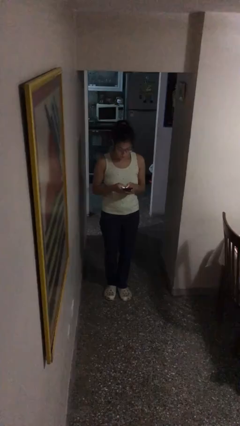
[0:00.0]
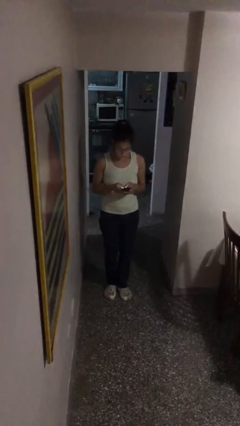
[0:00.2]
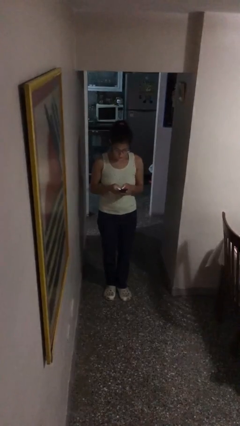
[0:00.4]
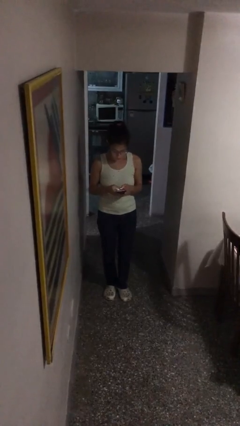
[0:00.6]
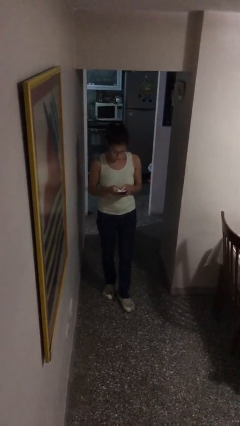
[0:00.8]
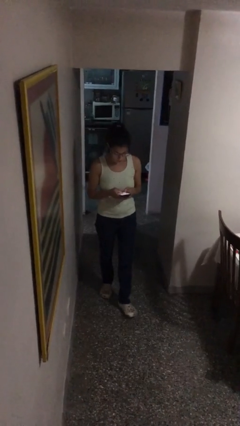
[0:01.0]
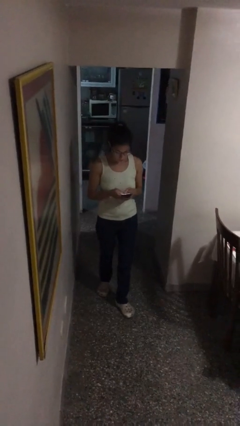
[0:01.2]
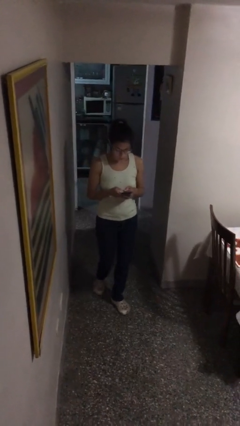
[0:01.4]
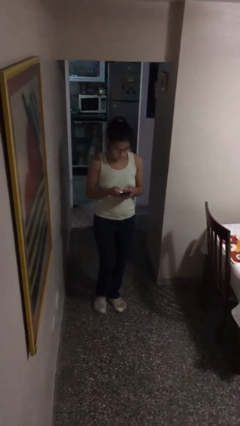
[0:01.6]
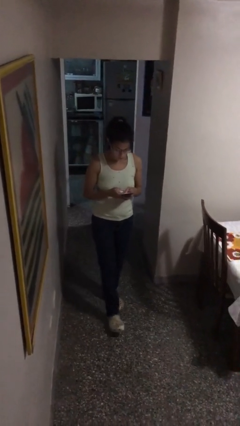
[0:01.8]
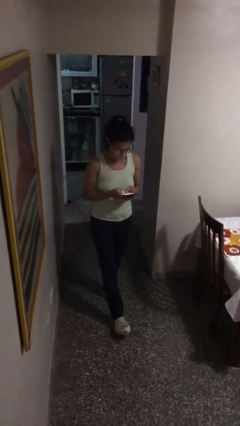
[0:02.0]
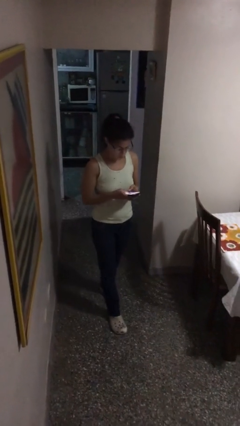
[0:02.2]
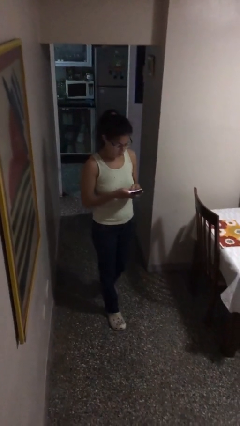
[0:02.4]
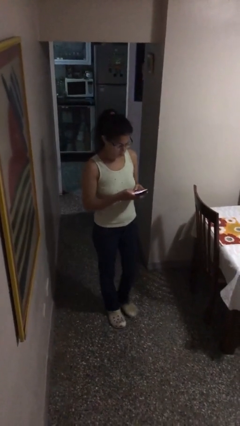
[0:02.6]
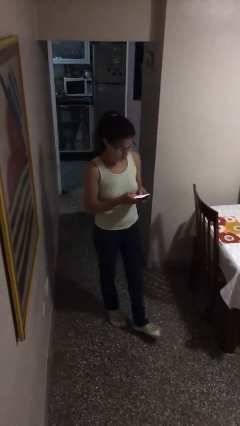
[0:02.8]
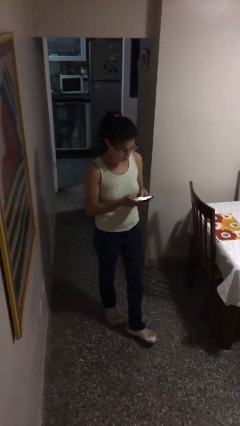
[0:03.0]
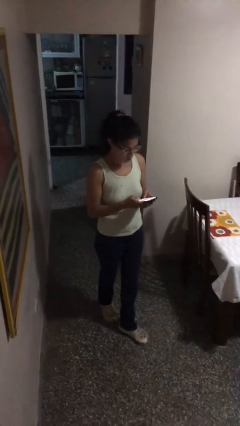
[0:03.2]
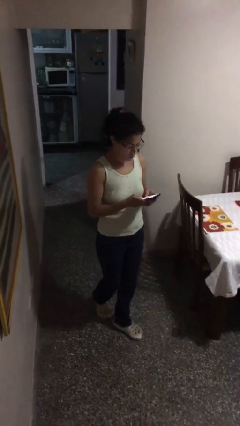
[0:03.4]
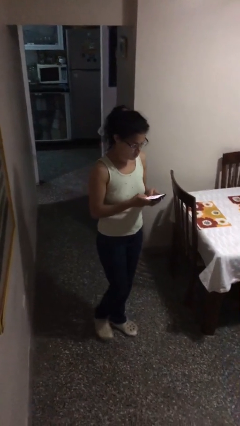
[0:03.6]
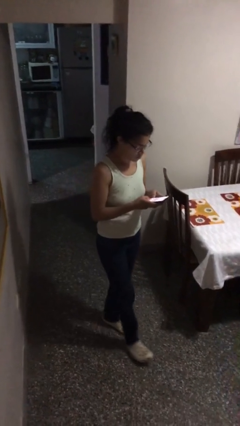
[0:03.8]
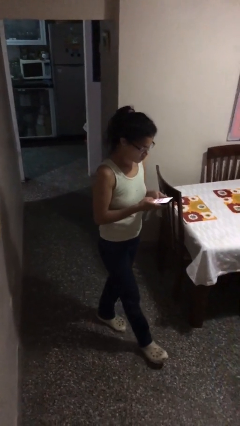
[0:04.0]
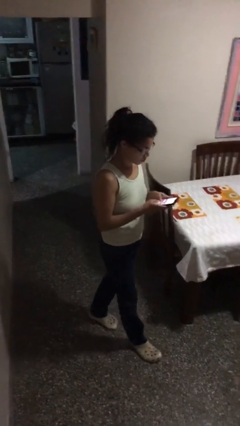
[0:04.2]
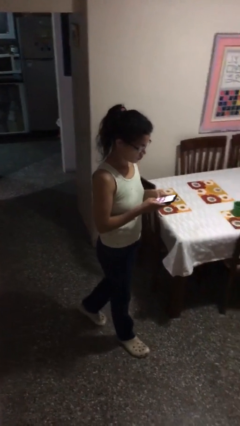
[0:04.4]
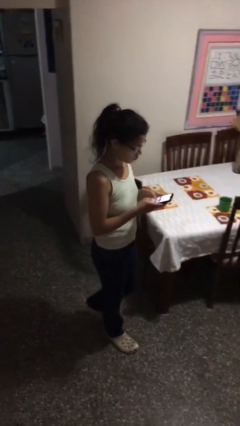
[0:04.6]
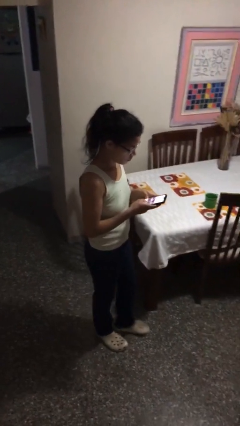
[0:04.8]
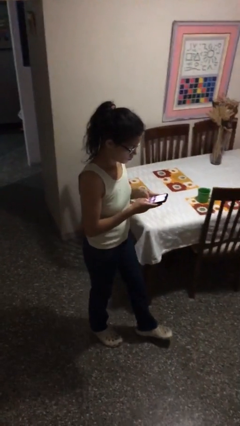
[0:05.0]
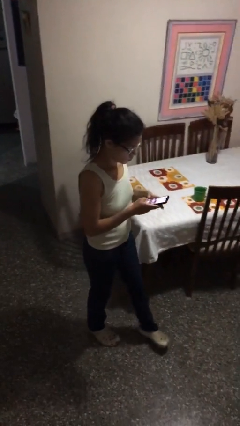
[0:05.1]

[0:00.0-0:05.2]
person texts on phone

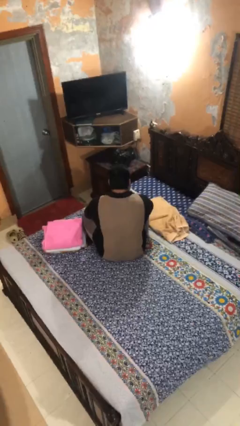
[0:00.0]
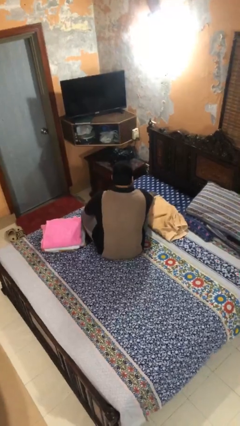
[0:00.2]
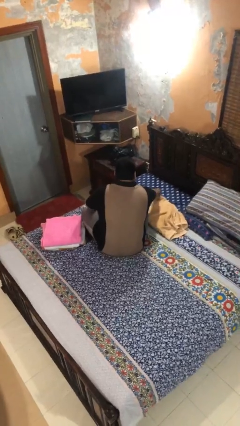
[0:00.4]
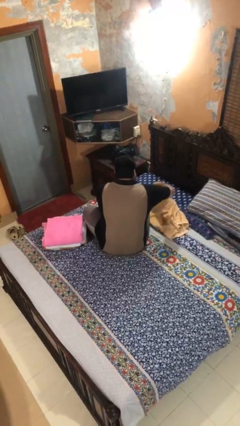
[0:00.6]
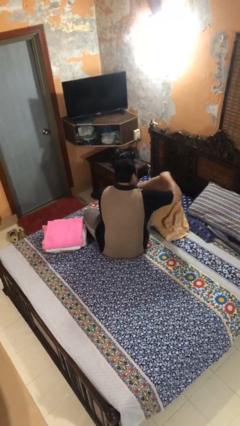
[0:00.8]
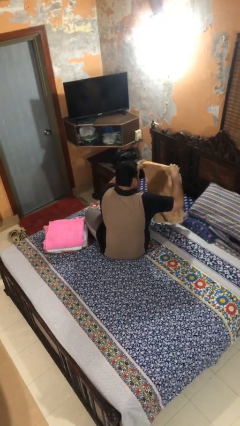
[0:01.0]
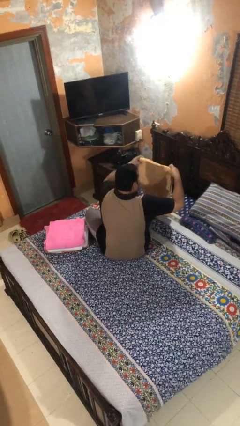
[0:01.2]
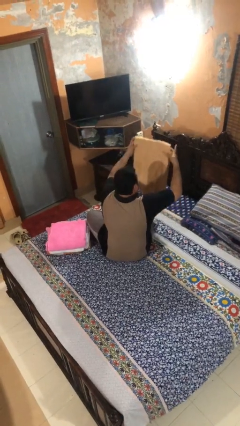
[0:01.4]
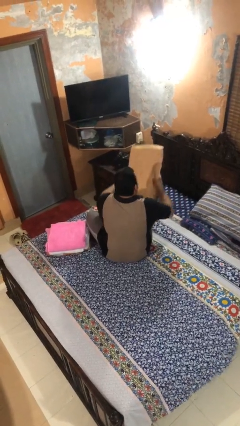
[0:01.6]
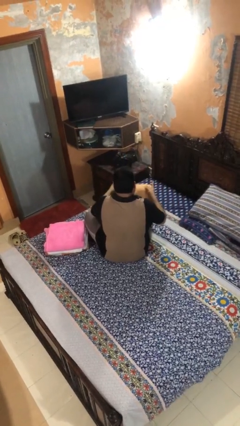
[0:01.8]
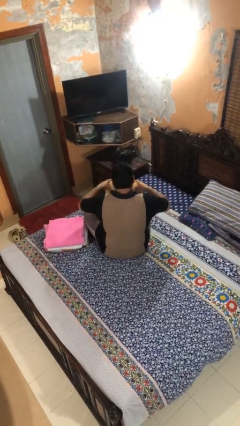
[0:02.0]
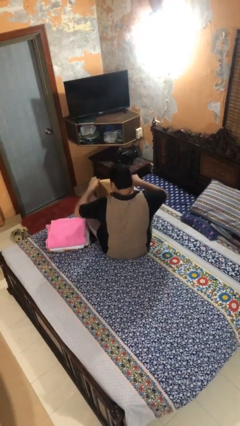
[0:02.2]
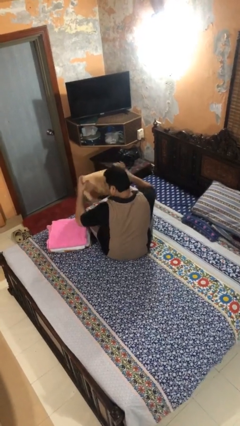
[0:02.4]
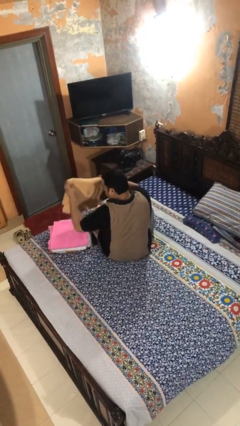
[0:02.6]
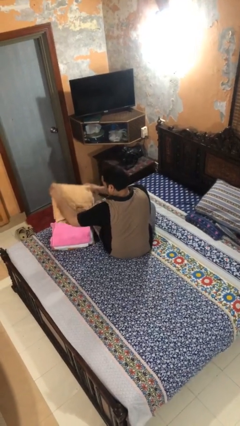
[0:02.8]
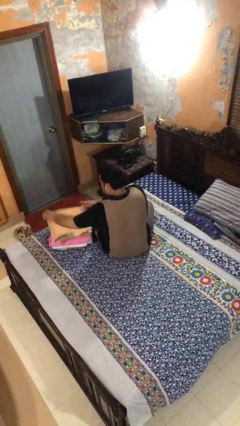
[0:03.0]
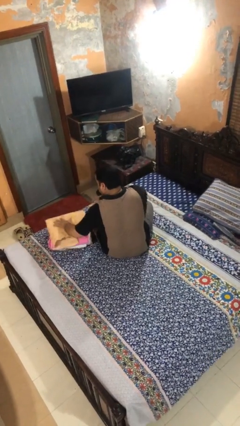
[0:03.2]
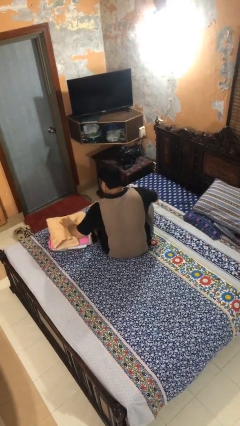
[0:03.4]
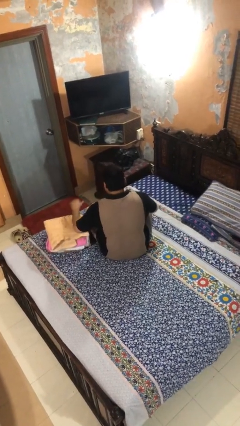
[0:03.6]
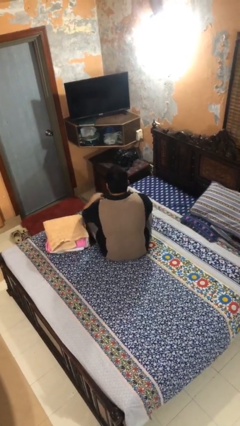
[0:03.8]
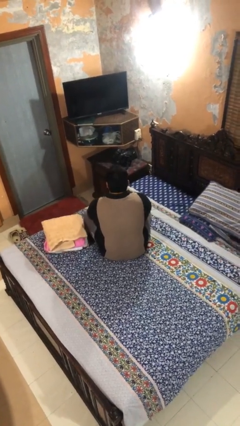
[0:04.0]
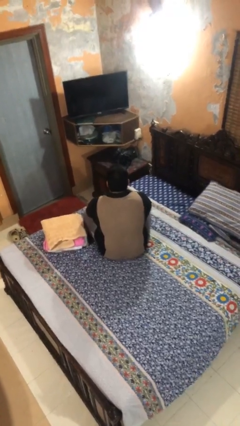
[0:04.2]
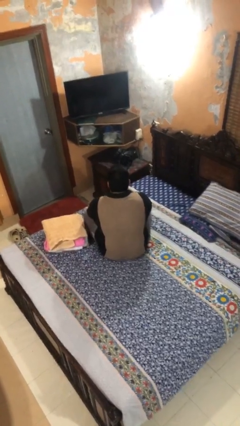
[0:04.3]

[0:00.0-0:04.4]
person folds towel

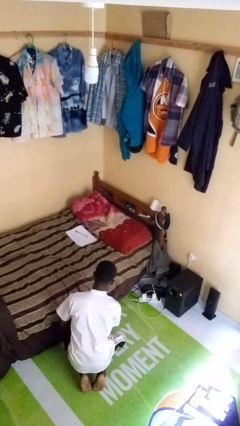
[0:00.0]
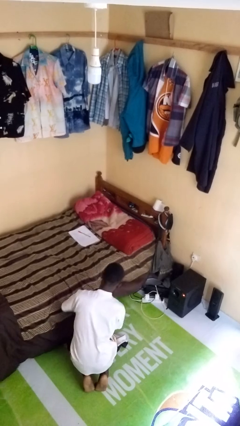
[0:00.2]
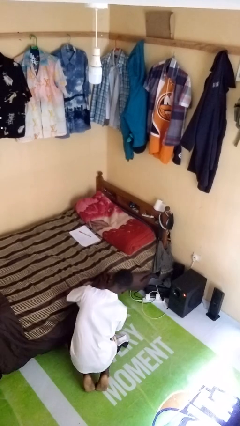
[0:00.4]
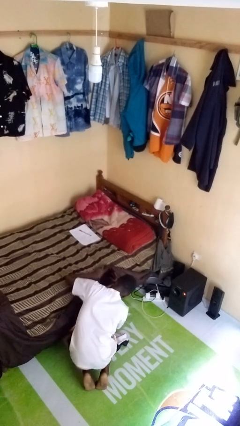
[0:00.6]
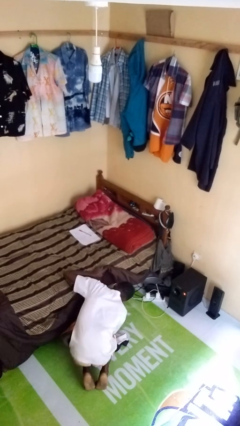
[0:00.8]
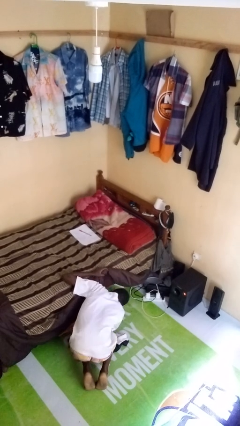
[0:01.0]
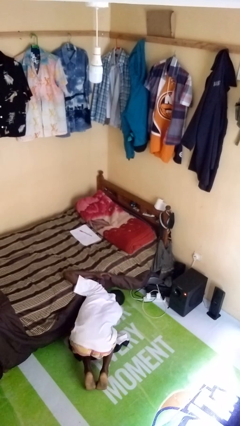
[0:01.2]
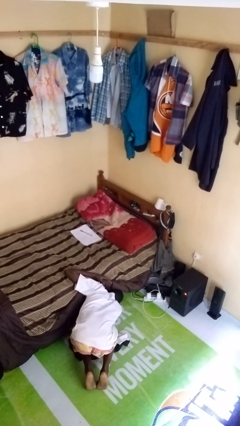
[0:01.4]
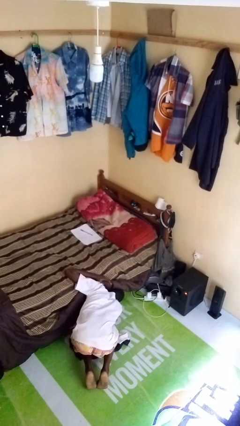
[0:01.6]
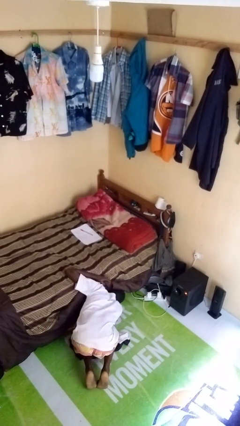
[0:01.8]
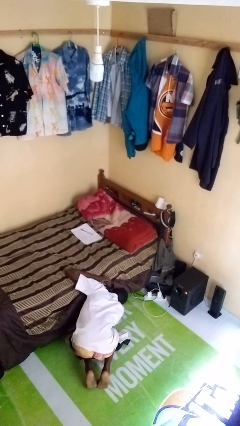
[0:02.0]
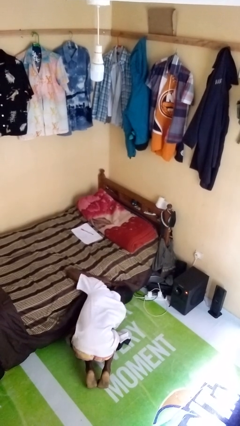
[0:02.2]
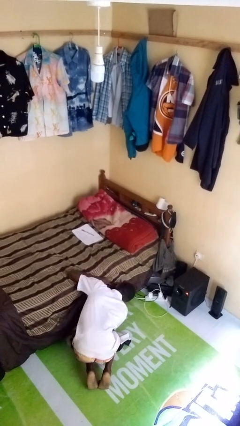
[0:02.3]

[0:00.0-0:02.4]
person searches under bed

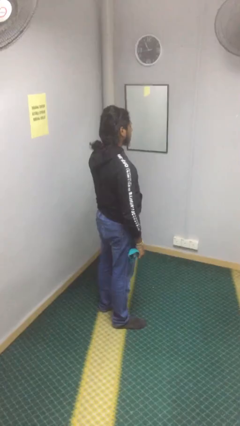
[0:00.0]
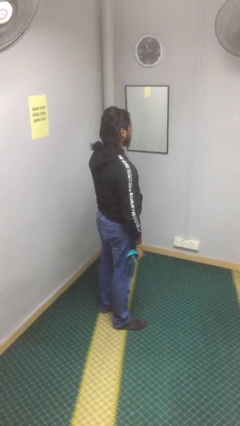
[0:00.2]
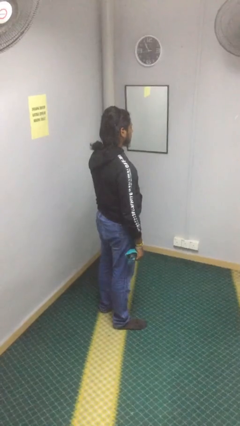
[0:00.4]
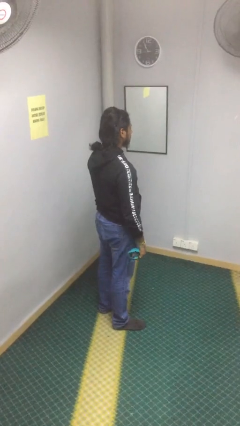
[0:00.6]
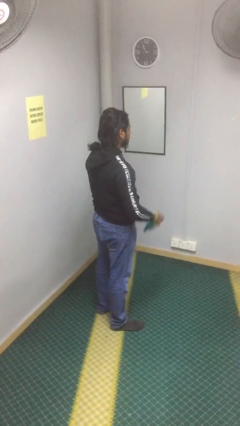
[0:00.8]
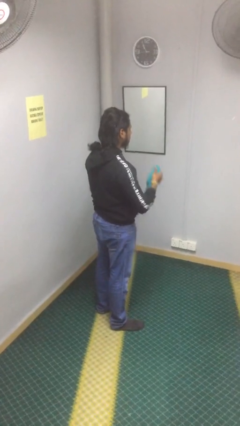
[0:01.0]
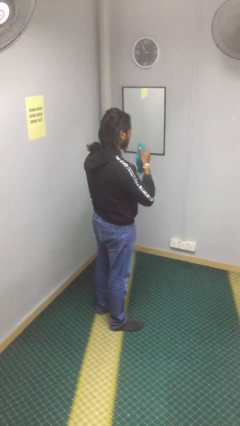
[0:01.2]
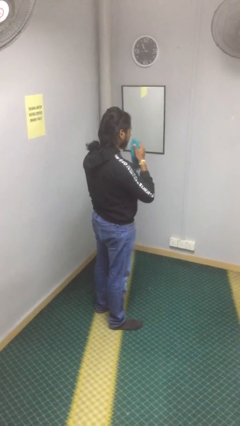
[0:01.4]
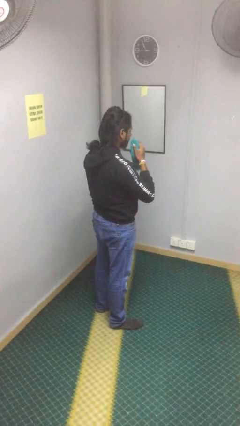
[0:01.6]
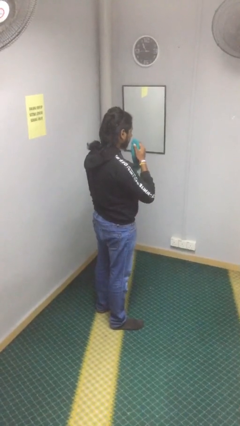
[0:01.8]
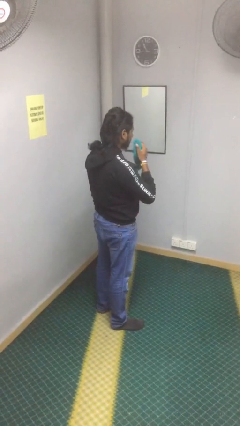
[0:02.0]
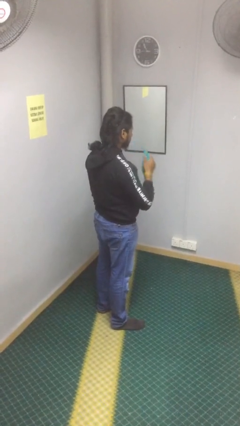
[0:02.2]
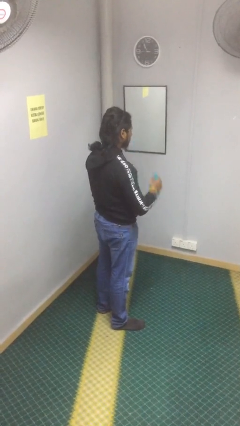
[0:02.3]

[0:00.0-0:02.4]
person wipes mouth with napkin

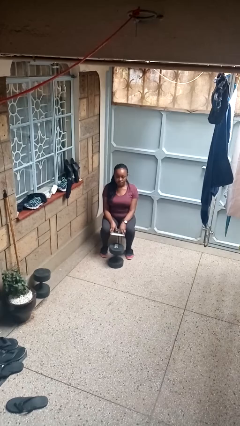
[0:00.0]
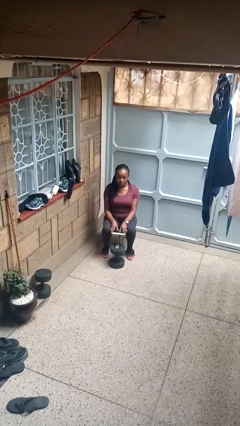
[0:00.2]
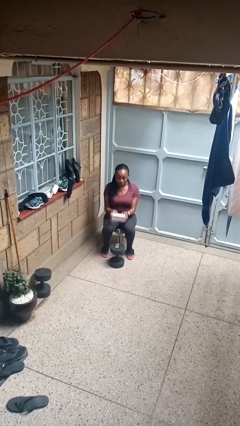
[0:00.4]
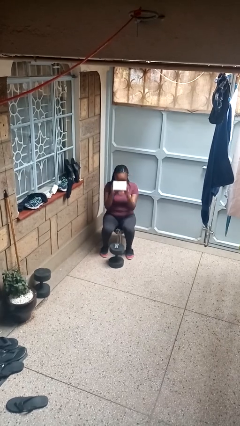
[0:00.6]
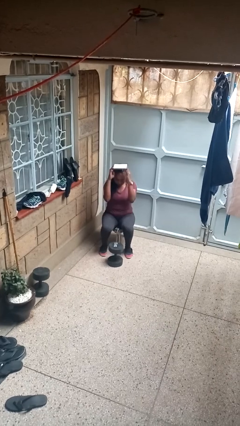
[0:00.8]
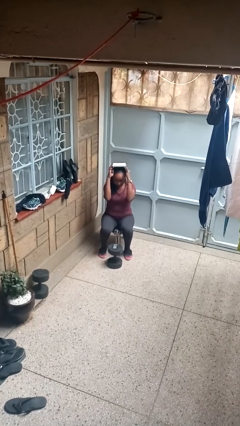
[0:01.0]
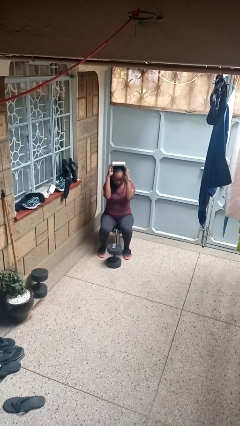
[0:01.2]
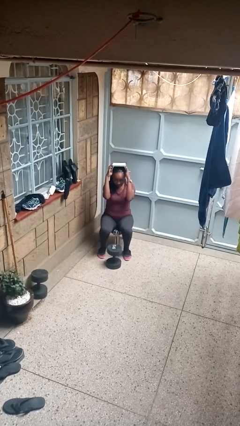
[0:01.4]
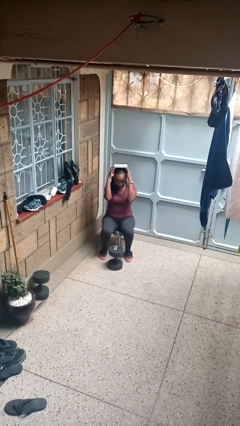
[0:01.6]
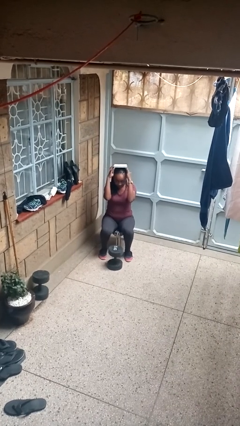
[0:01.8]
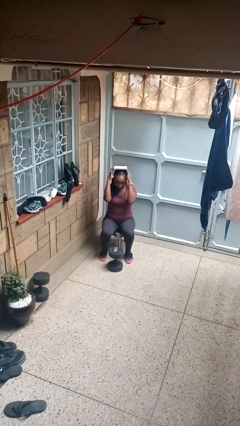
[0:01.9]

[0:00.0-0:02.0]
person holds object above head

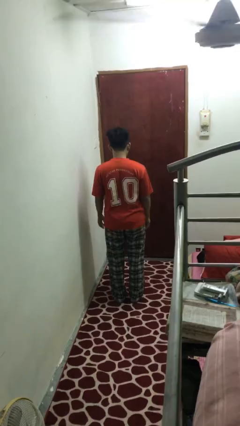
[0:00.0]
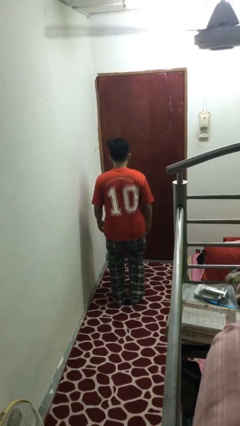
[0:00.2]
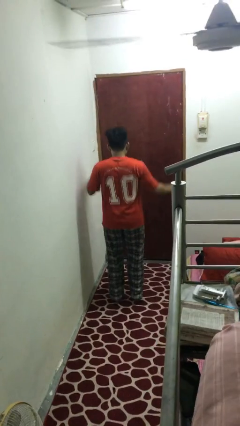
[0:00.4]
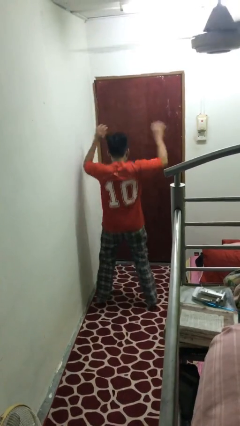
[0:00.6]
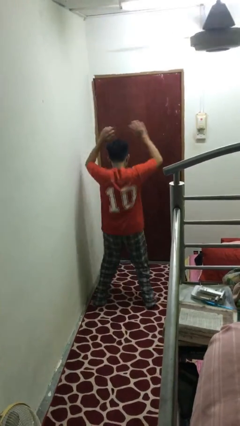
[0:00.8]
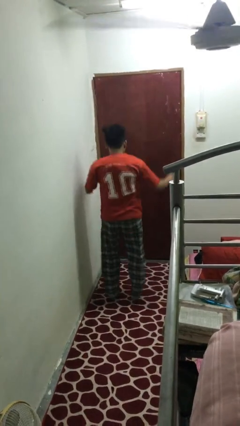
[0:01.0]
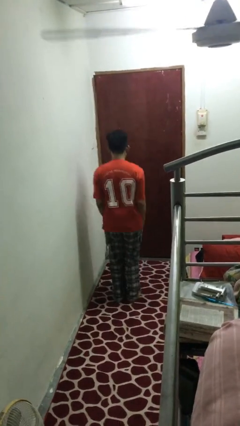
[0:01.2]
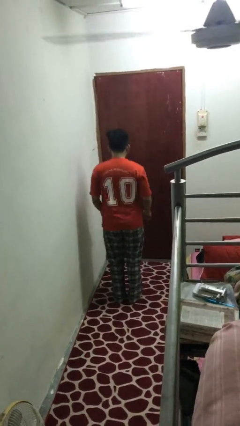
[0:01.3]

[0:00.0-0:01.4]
person exercises with jumping jacks
